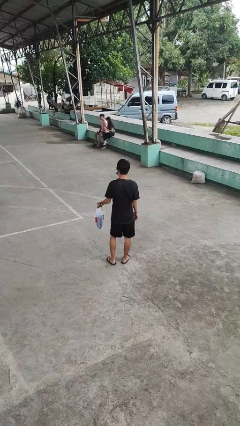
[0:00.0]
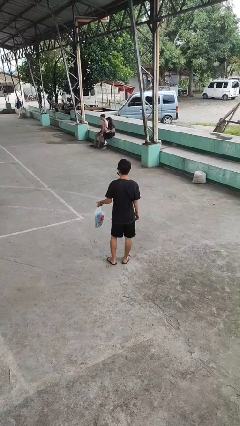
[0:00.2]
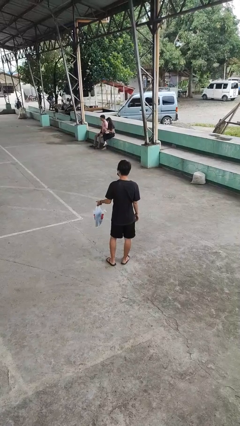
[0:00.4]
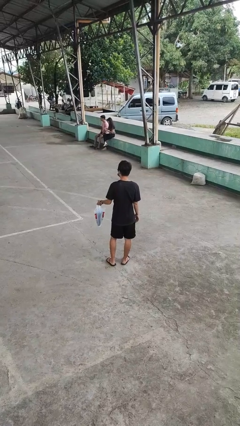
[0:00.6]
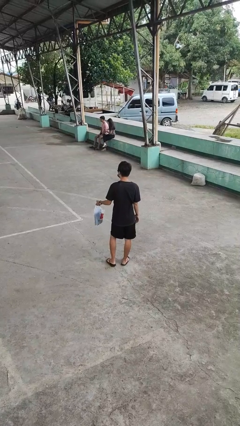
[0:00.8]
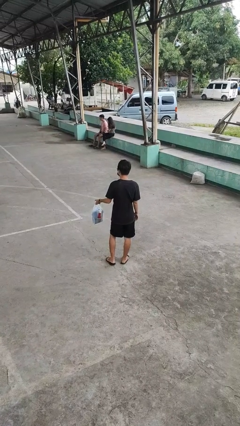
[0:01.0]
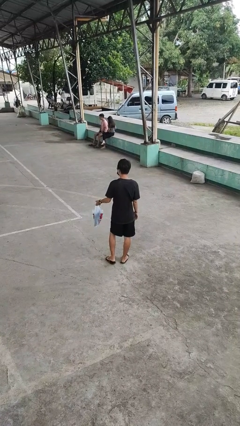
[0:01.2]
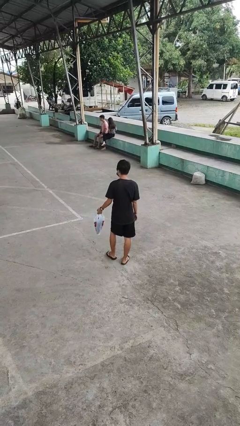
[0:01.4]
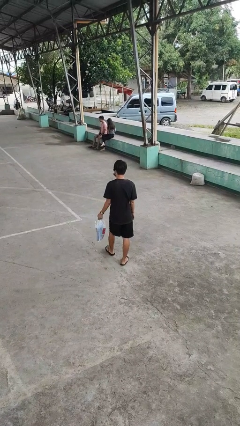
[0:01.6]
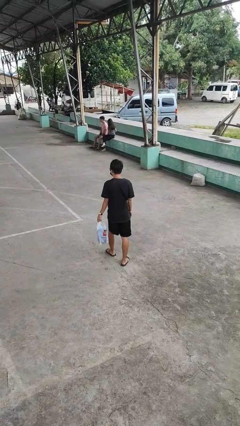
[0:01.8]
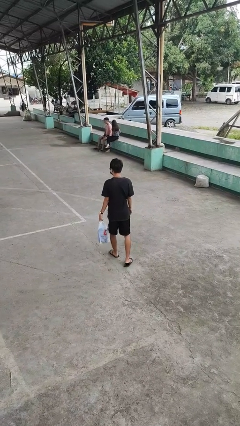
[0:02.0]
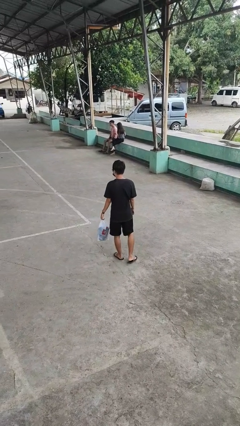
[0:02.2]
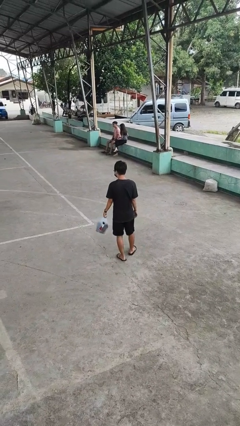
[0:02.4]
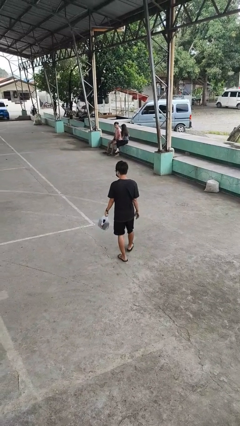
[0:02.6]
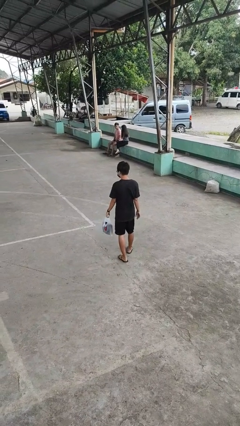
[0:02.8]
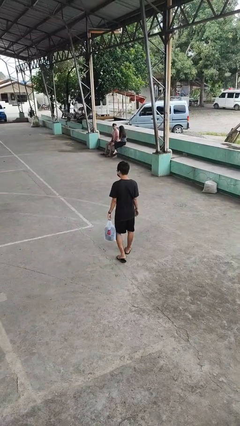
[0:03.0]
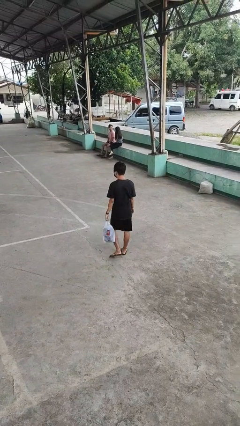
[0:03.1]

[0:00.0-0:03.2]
person carries groceries

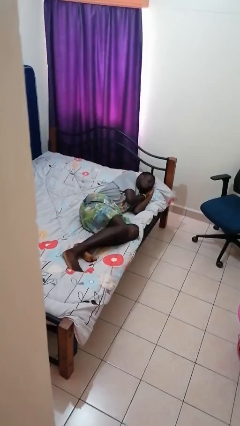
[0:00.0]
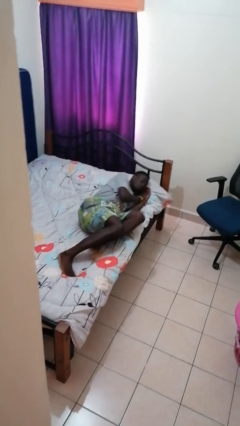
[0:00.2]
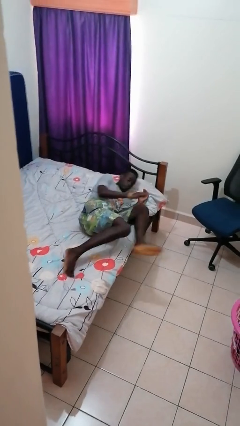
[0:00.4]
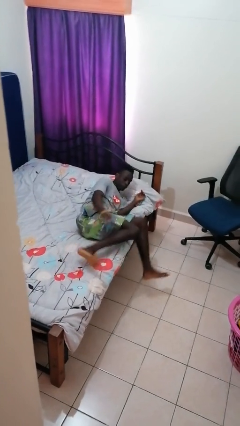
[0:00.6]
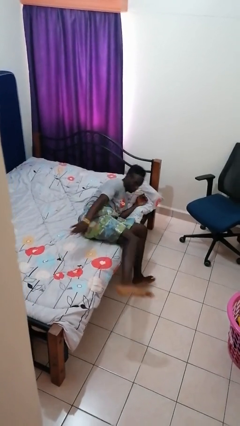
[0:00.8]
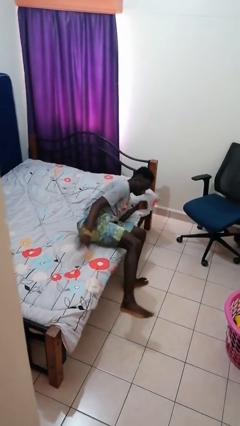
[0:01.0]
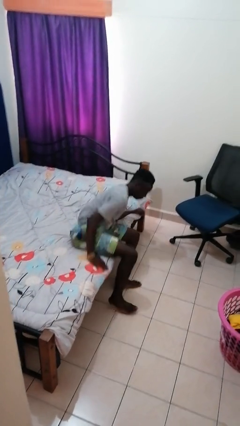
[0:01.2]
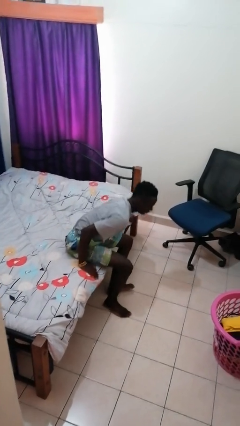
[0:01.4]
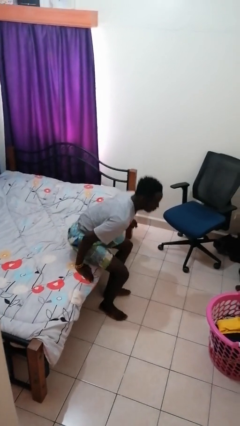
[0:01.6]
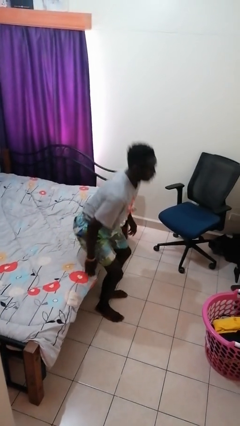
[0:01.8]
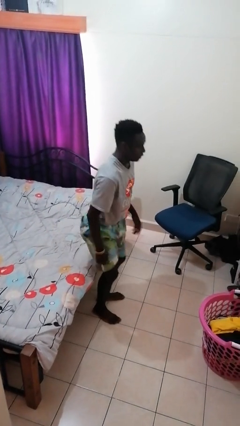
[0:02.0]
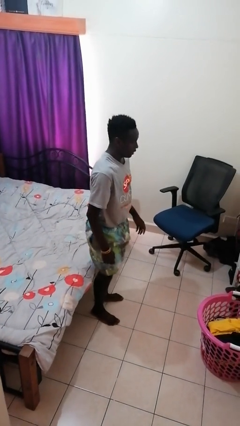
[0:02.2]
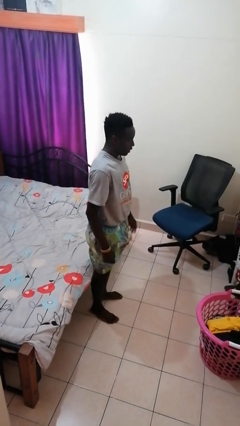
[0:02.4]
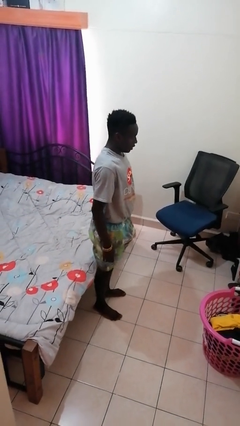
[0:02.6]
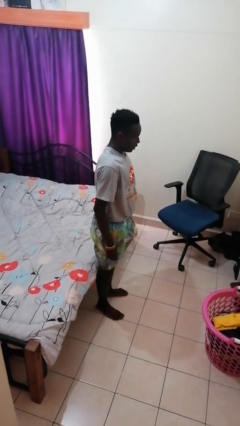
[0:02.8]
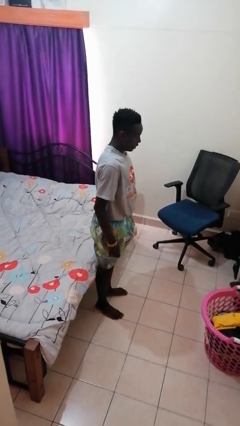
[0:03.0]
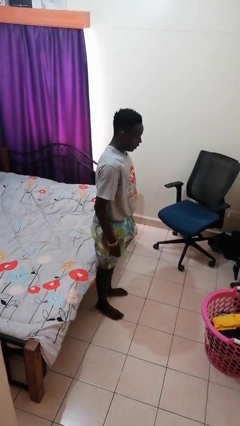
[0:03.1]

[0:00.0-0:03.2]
person stands up

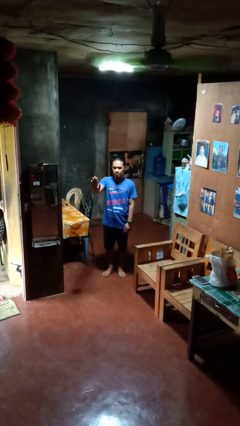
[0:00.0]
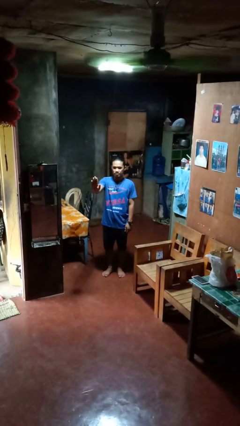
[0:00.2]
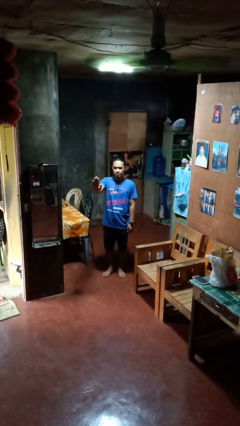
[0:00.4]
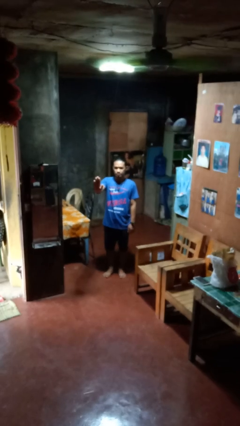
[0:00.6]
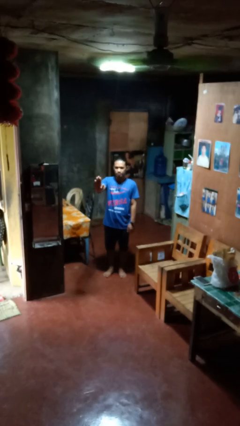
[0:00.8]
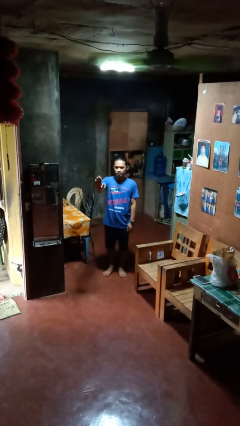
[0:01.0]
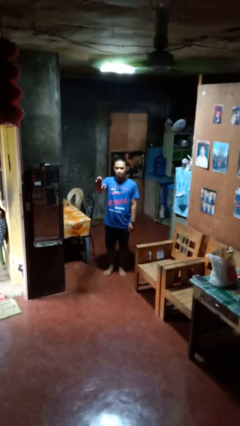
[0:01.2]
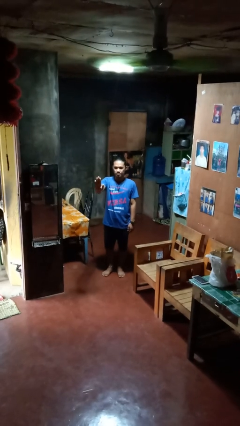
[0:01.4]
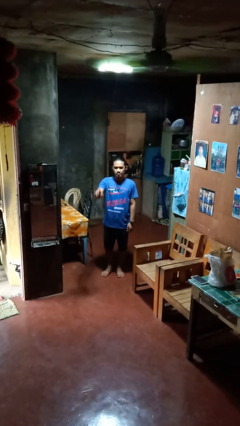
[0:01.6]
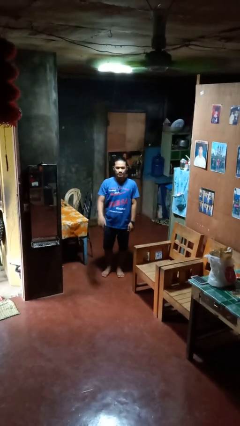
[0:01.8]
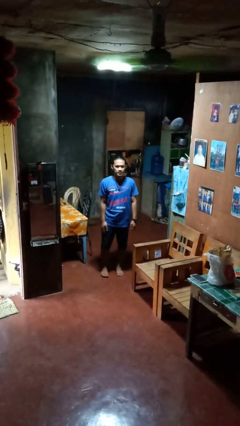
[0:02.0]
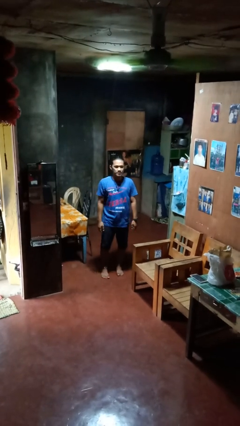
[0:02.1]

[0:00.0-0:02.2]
person gestures stop

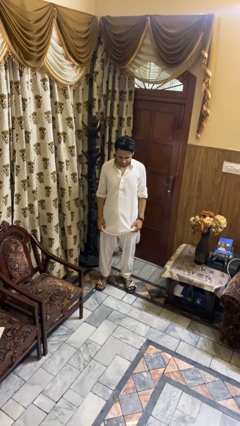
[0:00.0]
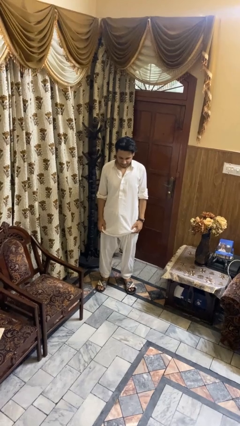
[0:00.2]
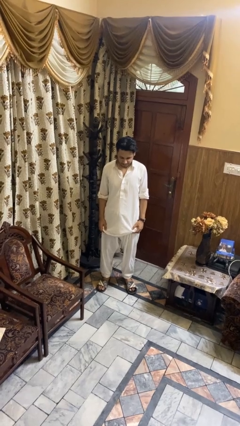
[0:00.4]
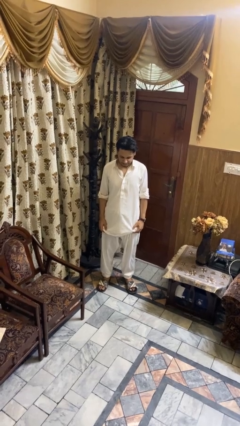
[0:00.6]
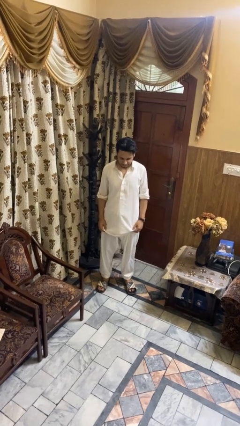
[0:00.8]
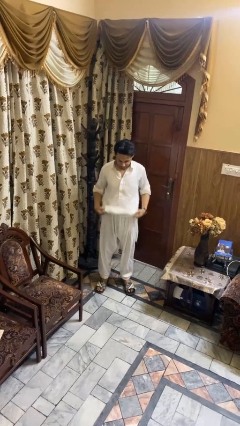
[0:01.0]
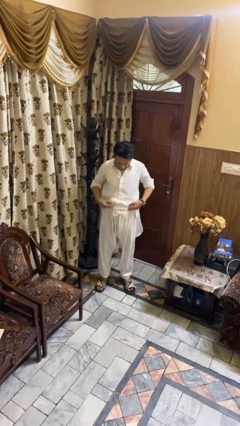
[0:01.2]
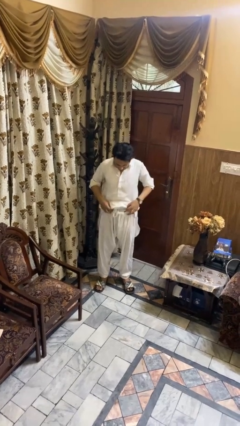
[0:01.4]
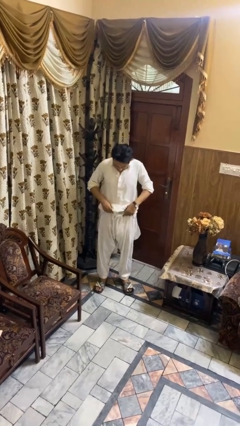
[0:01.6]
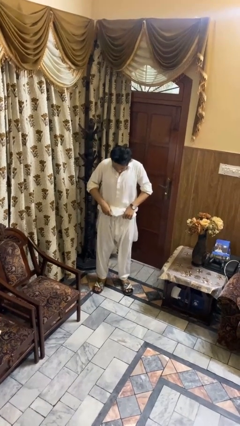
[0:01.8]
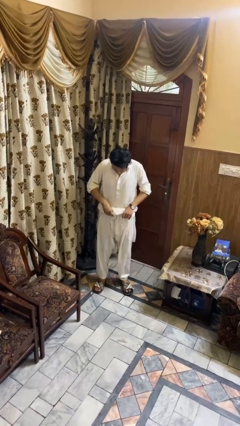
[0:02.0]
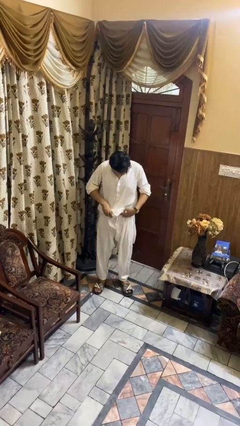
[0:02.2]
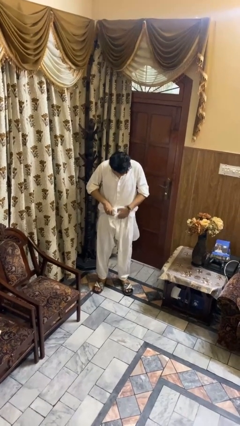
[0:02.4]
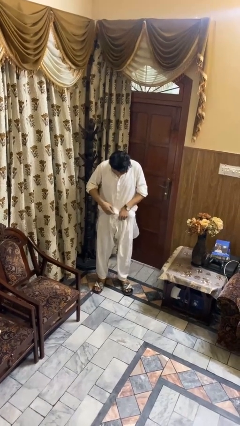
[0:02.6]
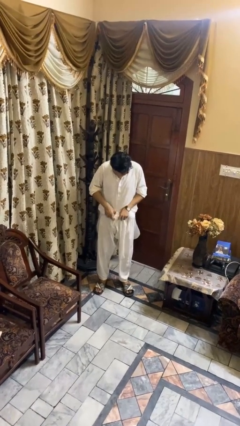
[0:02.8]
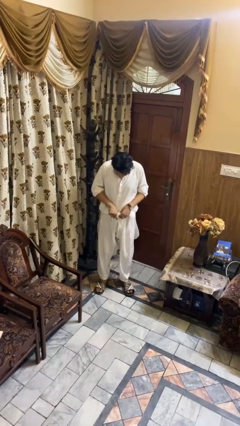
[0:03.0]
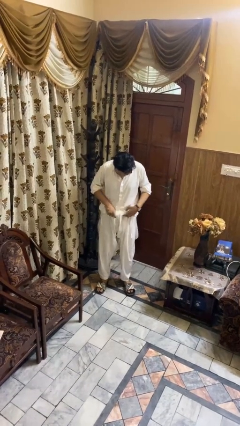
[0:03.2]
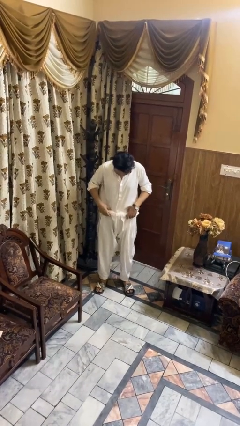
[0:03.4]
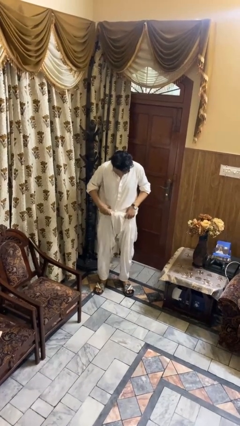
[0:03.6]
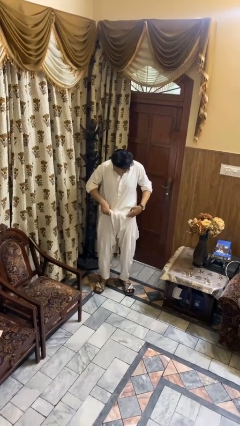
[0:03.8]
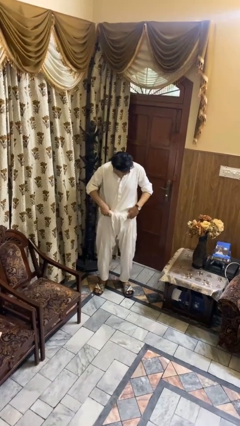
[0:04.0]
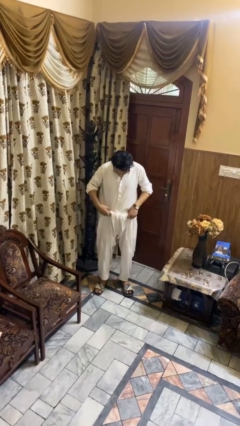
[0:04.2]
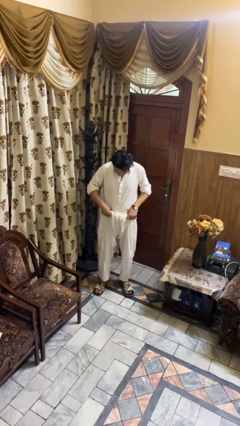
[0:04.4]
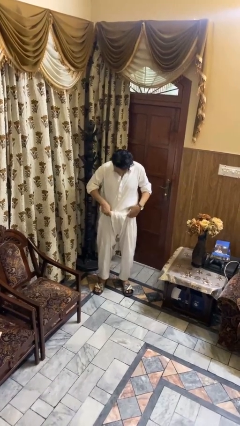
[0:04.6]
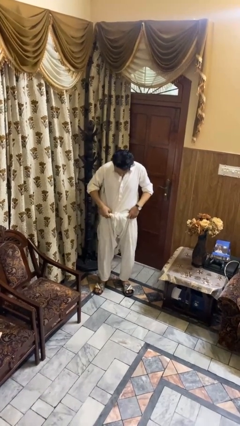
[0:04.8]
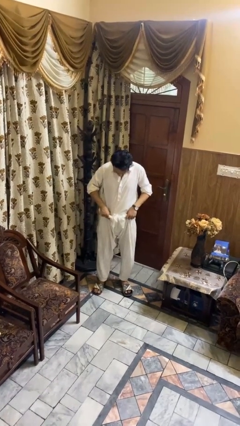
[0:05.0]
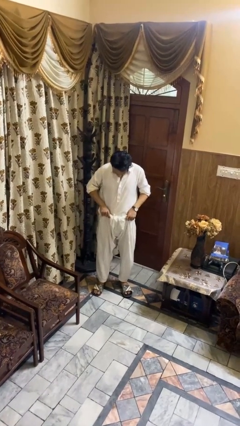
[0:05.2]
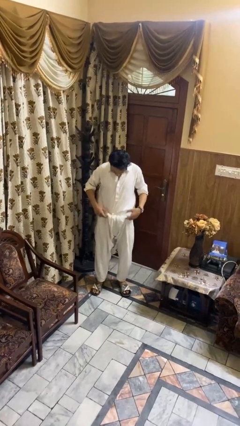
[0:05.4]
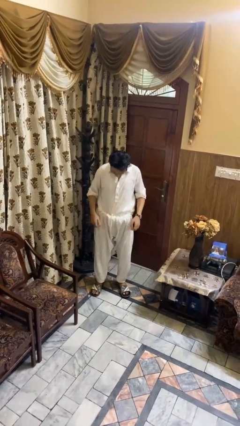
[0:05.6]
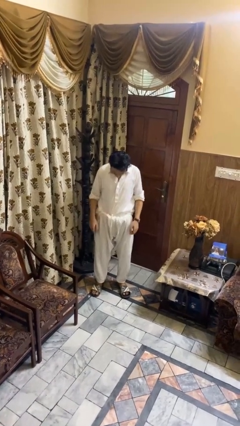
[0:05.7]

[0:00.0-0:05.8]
person tucks in shirt

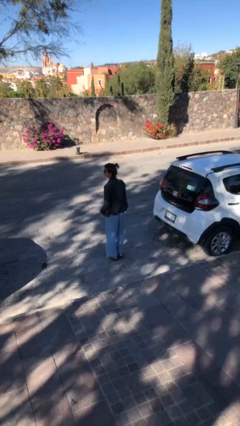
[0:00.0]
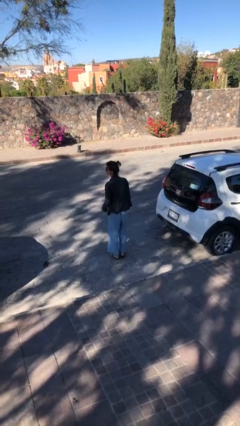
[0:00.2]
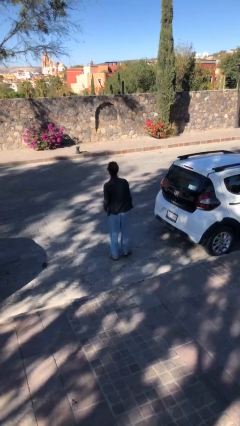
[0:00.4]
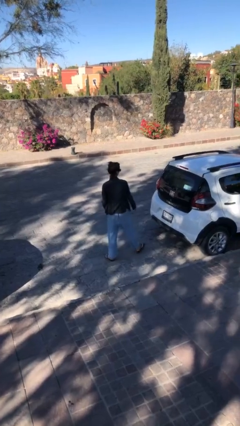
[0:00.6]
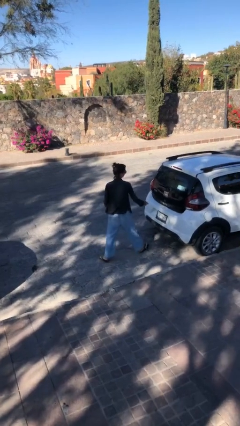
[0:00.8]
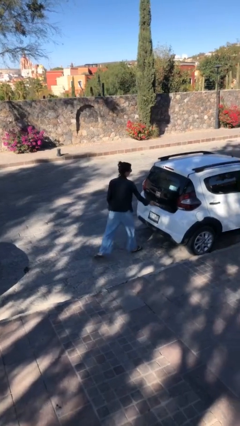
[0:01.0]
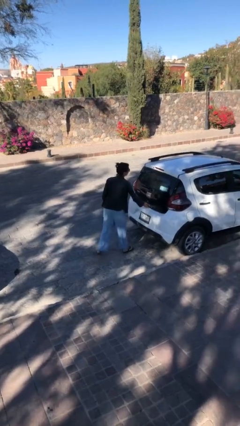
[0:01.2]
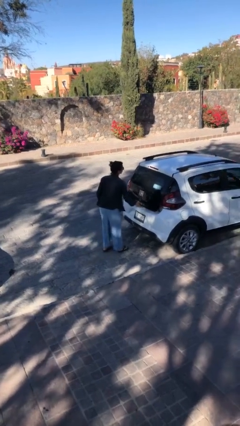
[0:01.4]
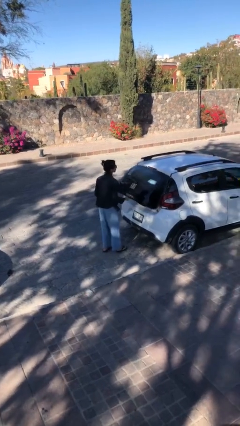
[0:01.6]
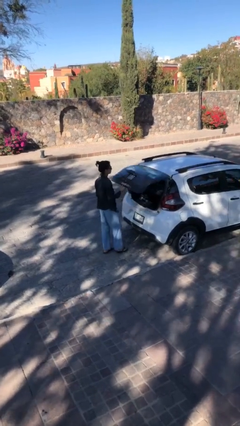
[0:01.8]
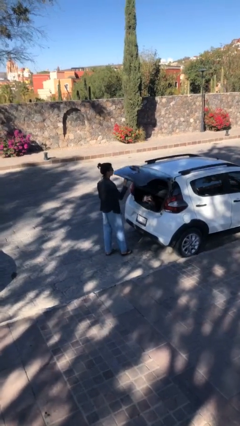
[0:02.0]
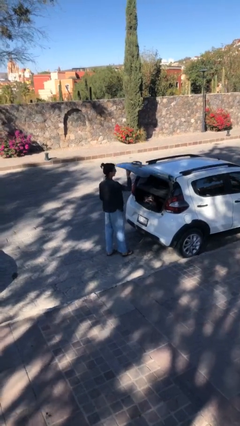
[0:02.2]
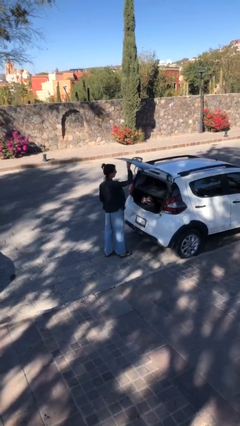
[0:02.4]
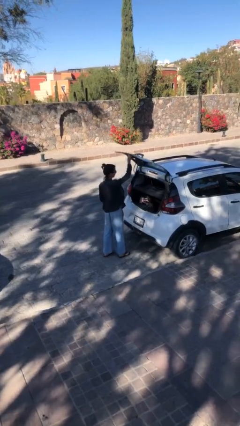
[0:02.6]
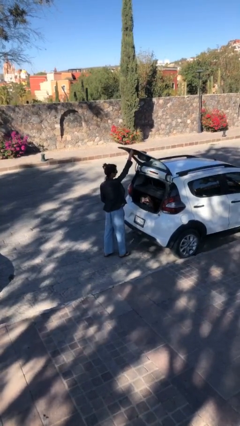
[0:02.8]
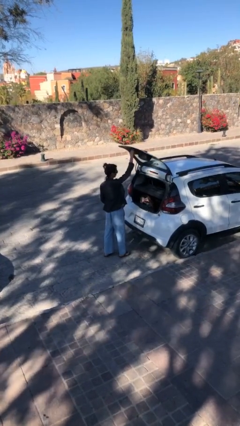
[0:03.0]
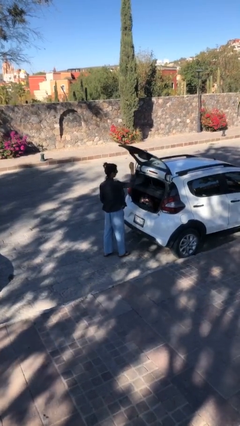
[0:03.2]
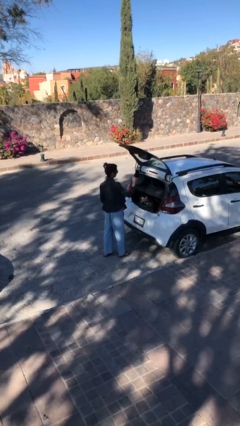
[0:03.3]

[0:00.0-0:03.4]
person opens car trunk
